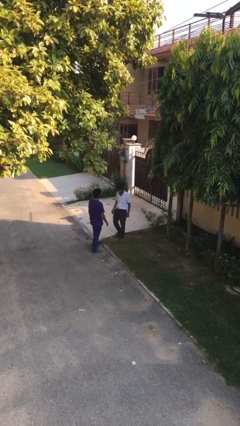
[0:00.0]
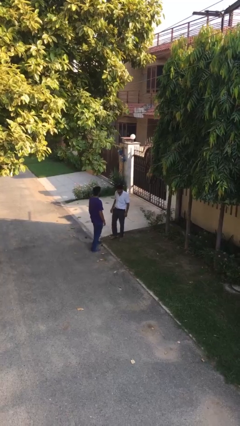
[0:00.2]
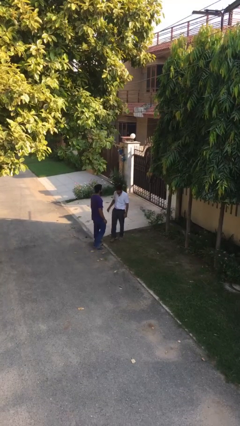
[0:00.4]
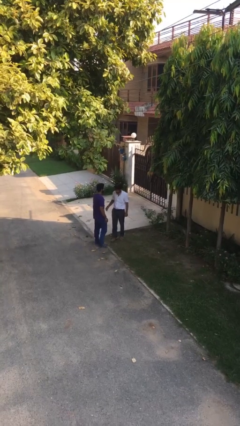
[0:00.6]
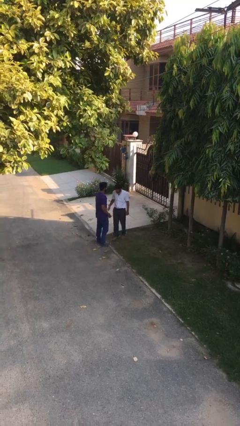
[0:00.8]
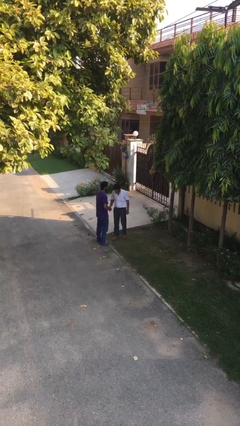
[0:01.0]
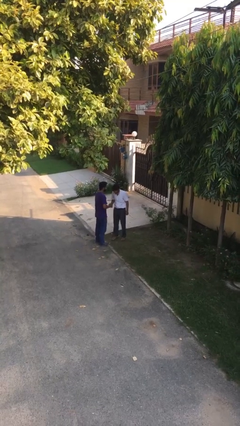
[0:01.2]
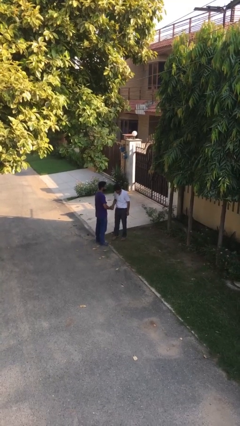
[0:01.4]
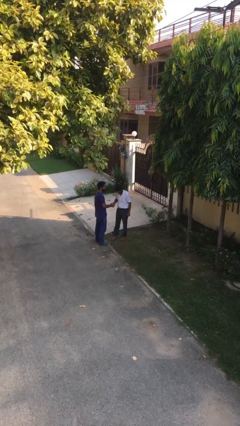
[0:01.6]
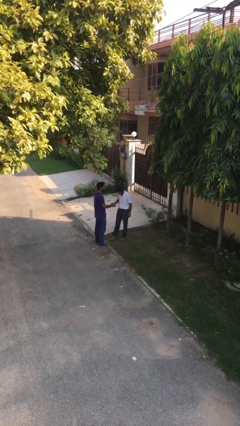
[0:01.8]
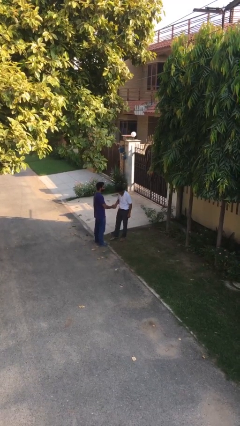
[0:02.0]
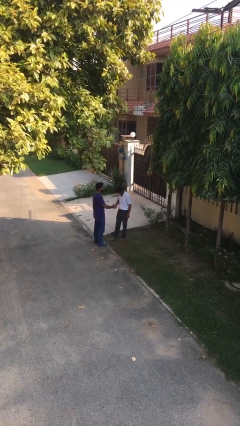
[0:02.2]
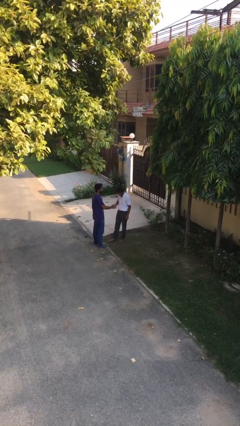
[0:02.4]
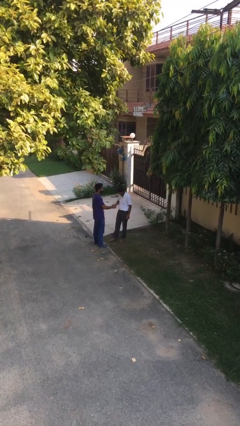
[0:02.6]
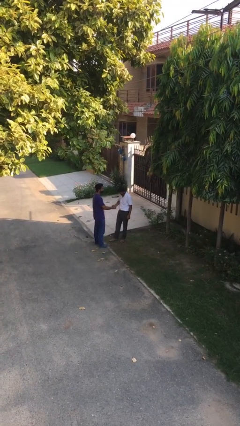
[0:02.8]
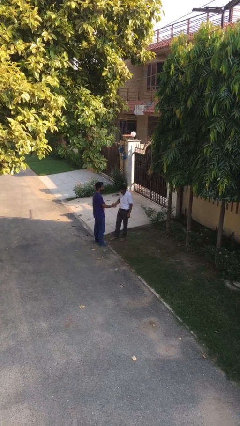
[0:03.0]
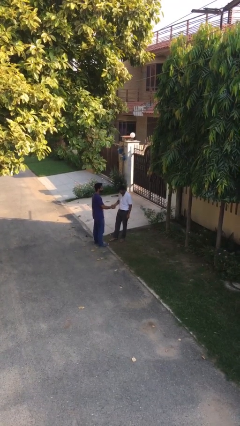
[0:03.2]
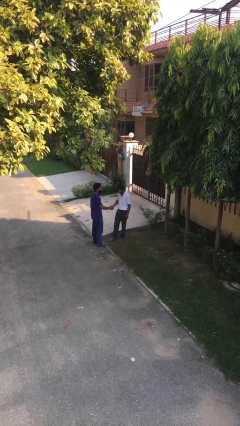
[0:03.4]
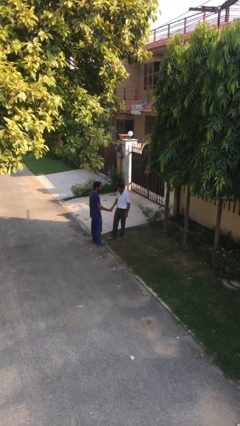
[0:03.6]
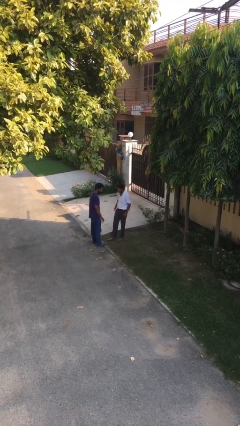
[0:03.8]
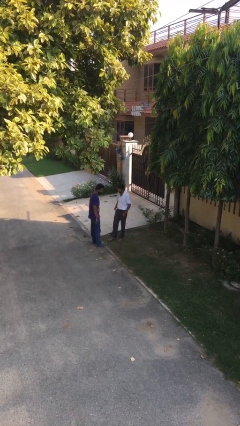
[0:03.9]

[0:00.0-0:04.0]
person shakes hand

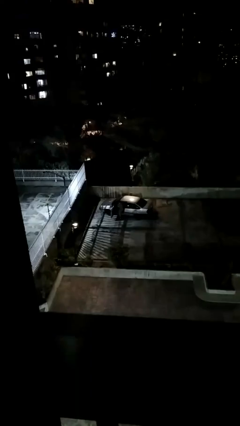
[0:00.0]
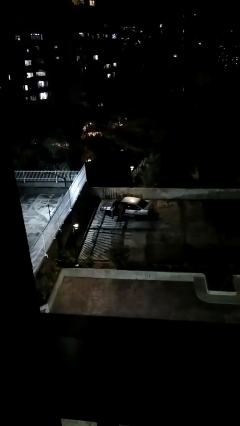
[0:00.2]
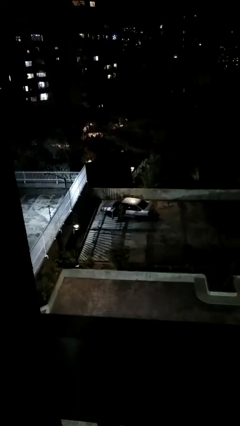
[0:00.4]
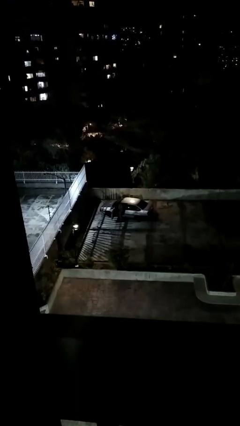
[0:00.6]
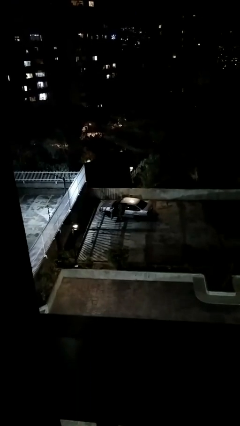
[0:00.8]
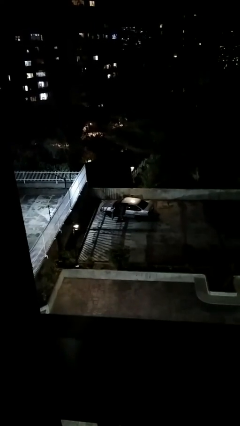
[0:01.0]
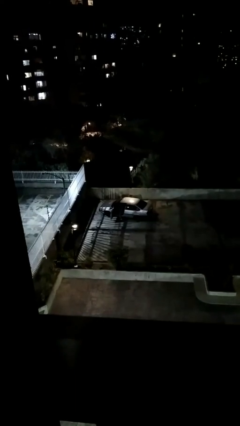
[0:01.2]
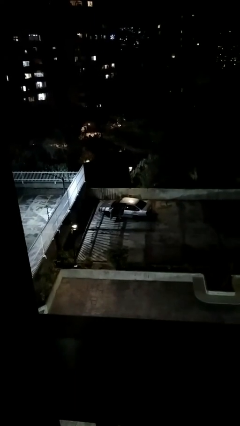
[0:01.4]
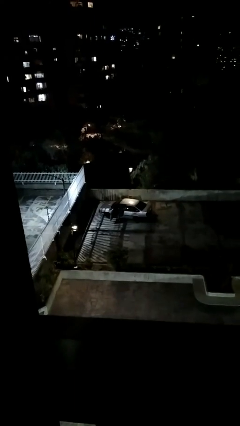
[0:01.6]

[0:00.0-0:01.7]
person enters car

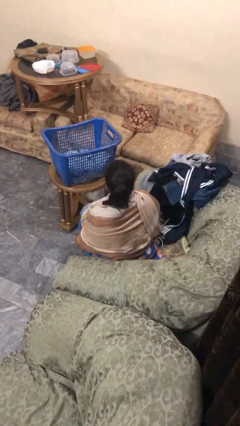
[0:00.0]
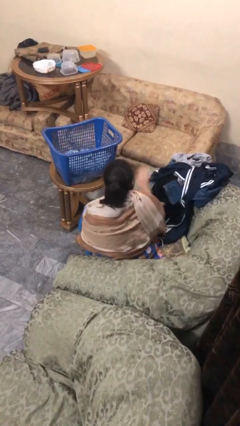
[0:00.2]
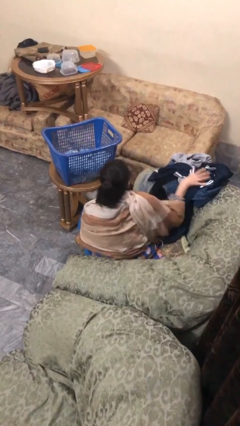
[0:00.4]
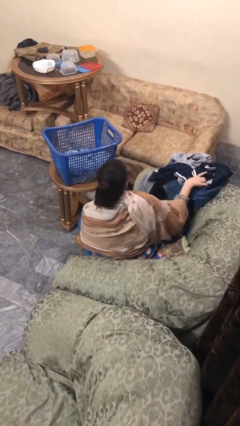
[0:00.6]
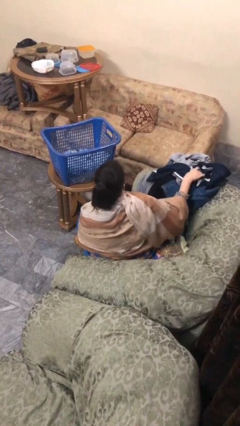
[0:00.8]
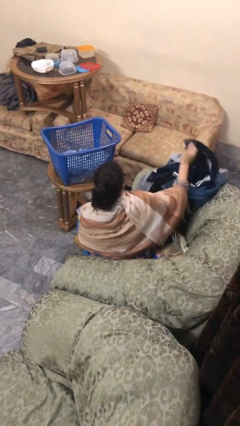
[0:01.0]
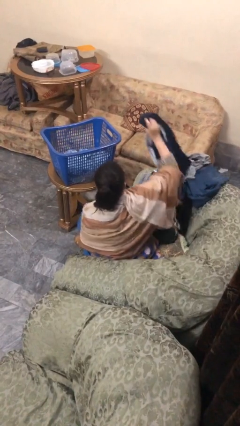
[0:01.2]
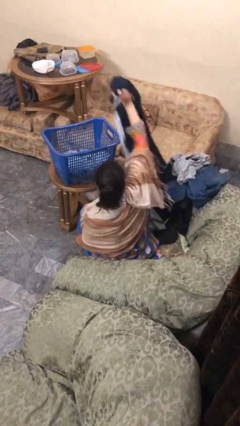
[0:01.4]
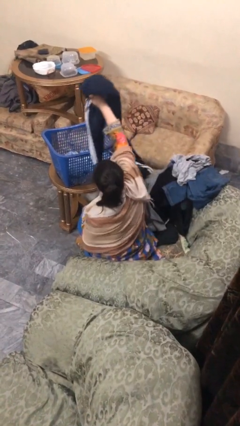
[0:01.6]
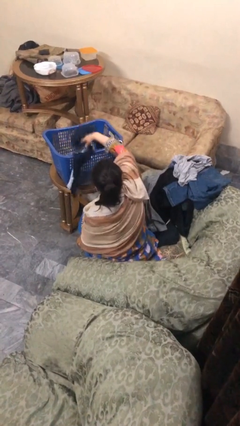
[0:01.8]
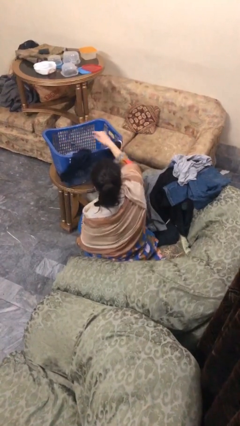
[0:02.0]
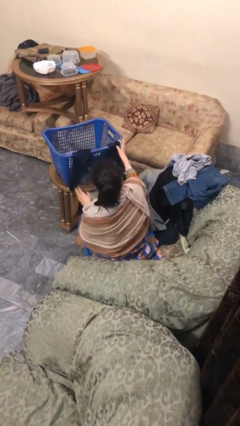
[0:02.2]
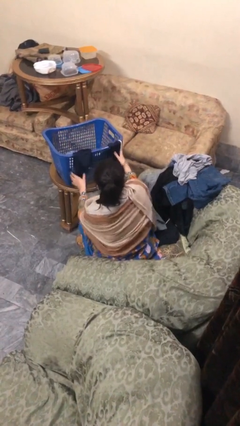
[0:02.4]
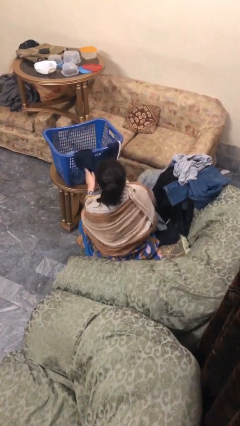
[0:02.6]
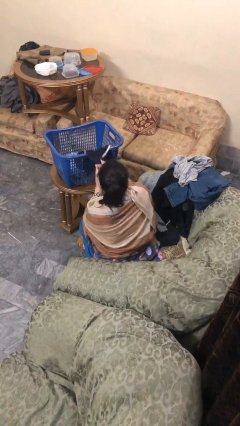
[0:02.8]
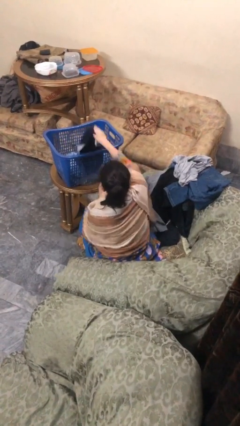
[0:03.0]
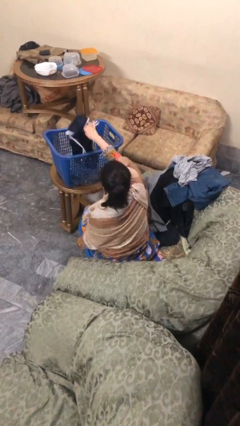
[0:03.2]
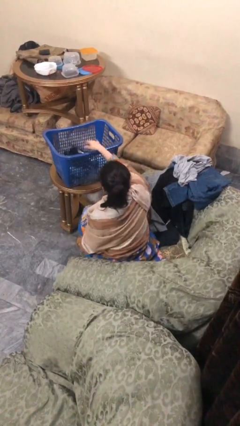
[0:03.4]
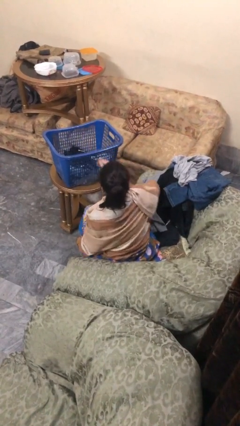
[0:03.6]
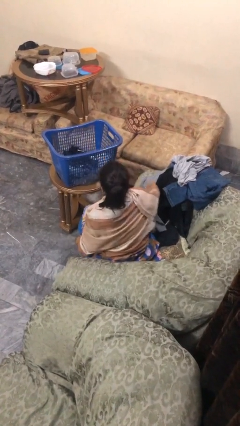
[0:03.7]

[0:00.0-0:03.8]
person puts object into basket

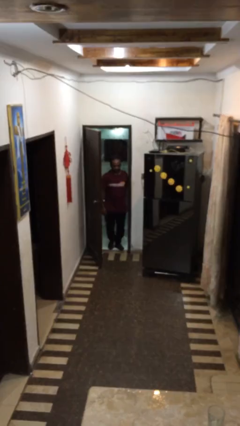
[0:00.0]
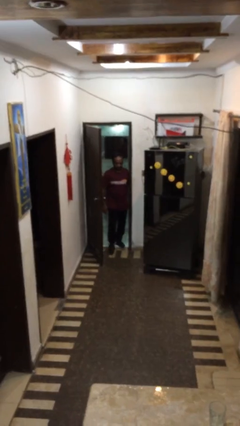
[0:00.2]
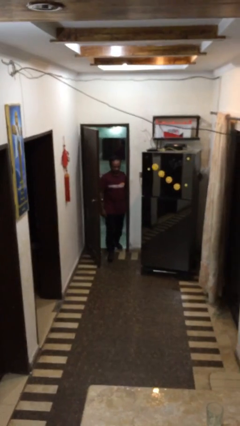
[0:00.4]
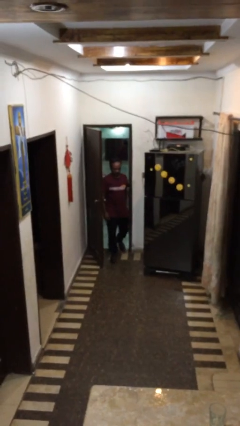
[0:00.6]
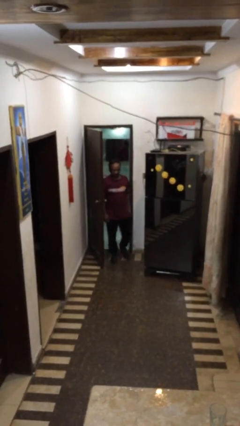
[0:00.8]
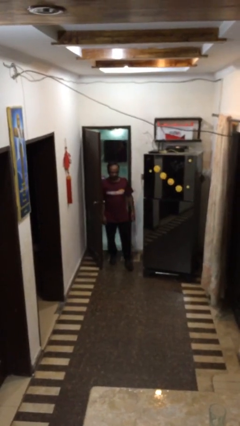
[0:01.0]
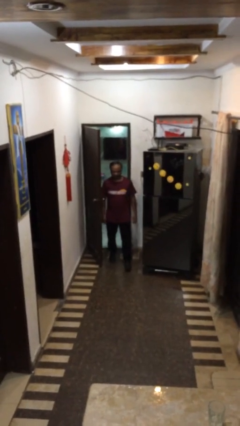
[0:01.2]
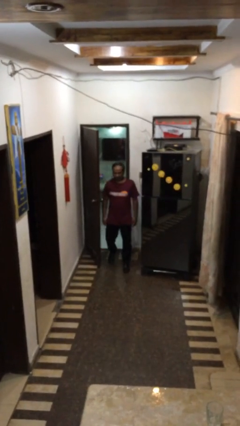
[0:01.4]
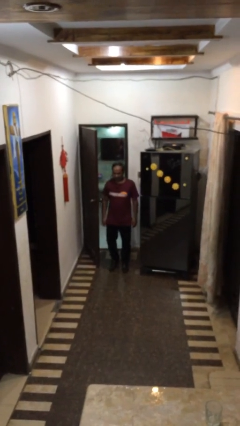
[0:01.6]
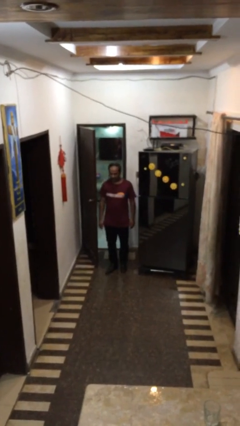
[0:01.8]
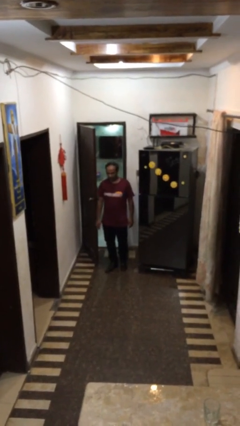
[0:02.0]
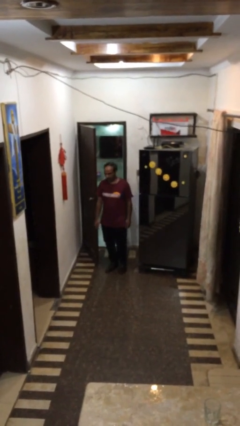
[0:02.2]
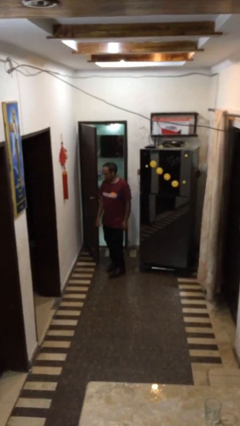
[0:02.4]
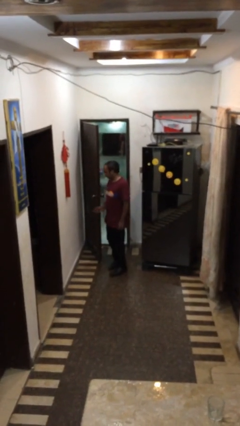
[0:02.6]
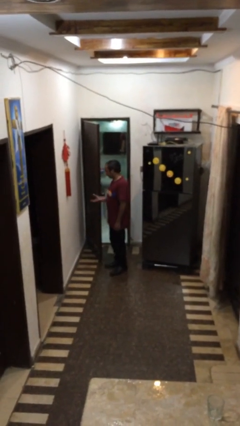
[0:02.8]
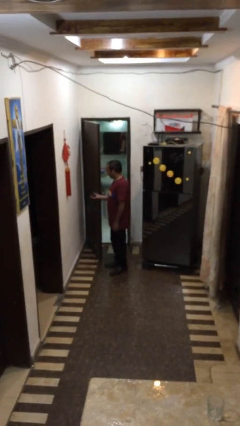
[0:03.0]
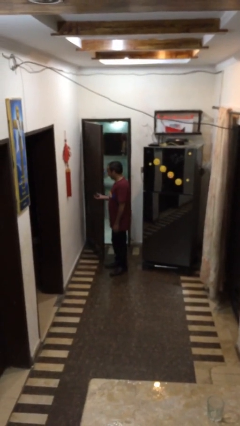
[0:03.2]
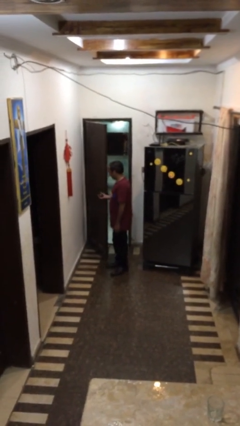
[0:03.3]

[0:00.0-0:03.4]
person enters scene through structure

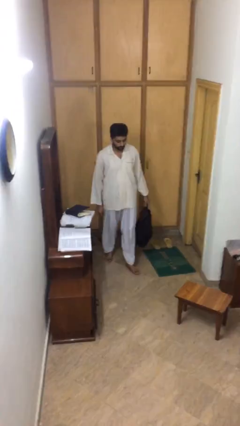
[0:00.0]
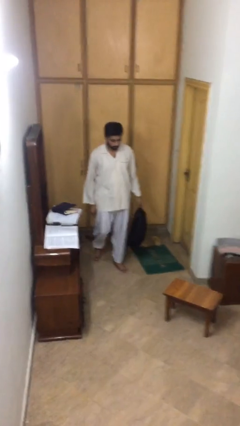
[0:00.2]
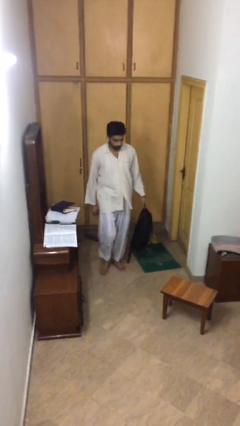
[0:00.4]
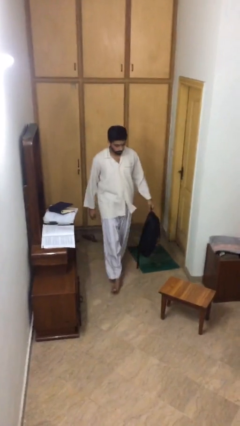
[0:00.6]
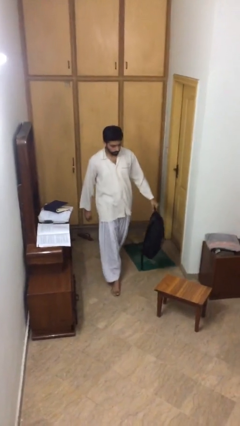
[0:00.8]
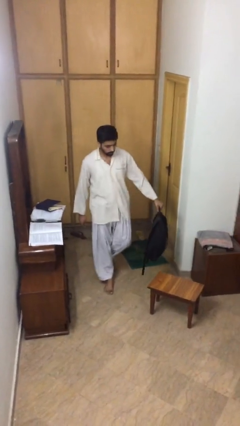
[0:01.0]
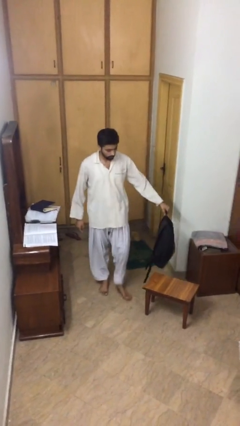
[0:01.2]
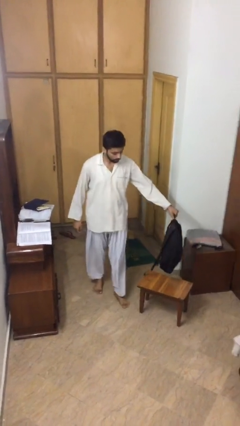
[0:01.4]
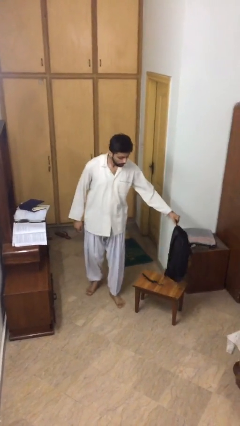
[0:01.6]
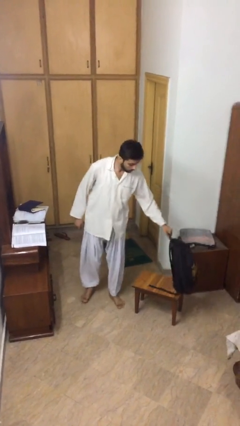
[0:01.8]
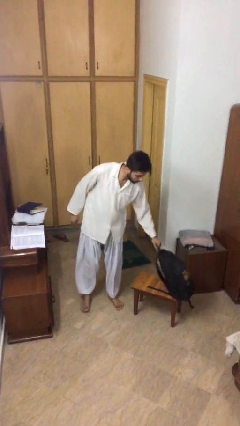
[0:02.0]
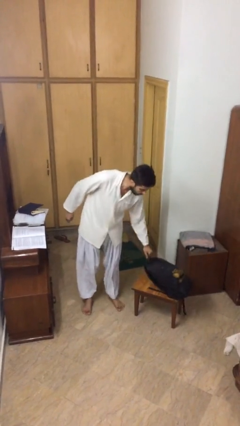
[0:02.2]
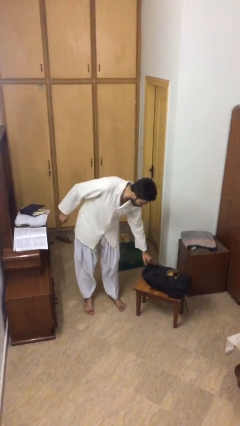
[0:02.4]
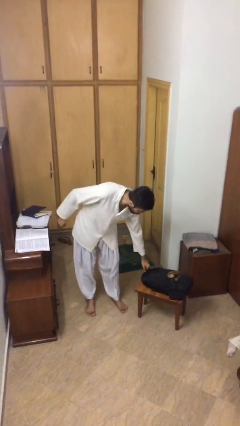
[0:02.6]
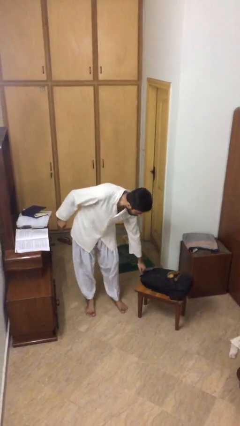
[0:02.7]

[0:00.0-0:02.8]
person puts down object on table

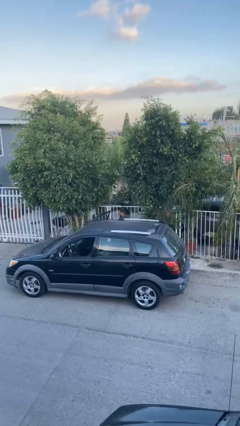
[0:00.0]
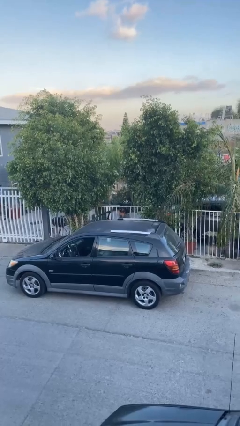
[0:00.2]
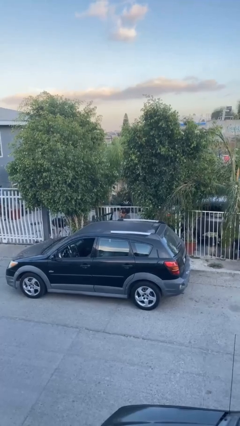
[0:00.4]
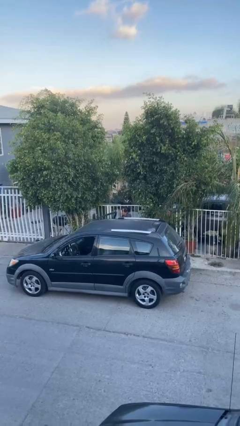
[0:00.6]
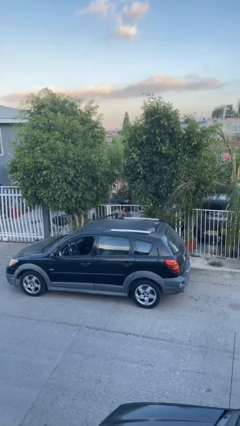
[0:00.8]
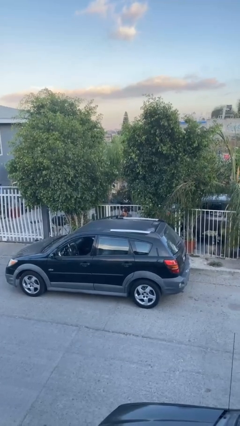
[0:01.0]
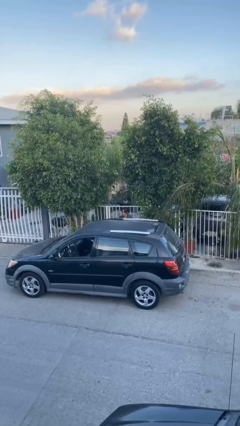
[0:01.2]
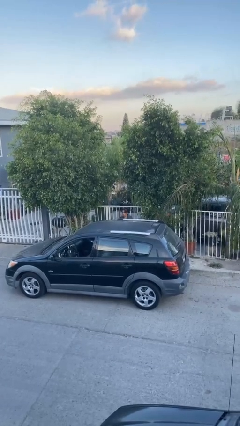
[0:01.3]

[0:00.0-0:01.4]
person closes car door

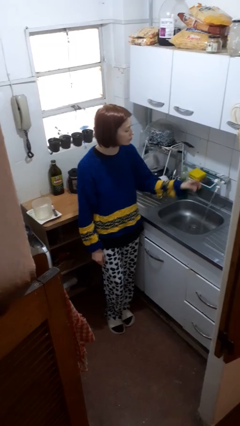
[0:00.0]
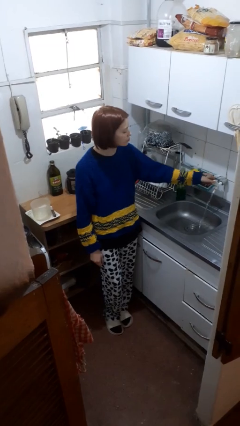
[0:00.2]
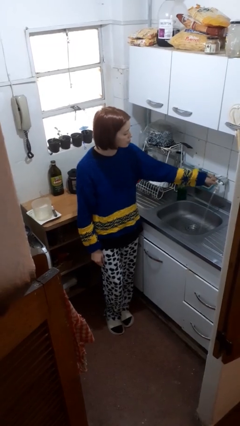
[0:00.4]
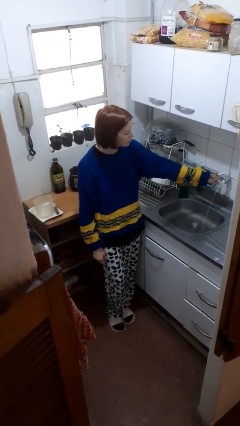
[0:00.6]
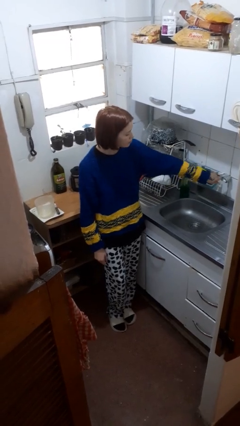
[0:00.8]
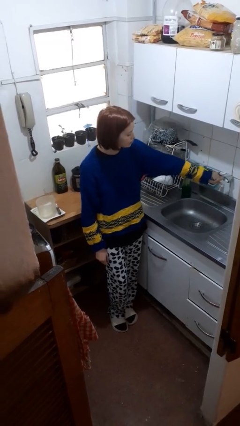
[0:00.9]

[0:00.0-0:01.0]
person turns off faucet
